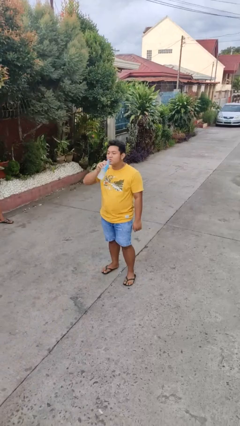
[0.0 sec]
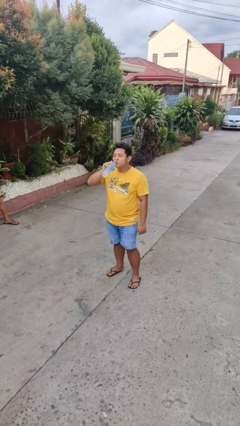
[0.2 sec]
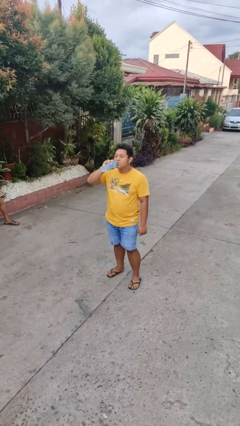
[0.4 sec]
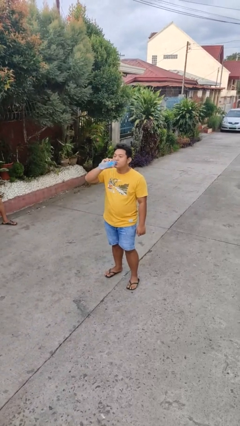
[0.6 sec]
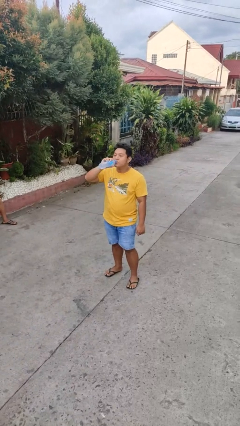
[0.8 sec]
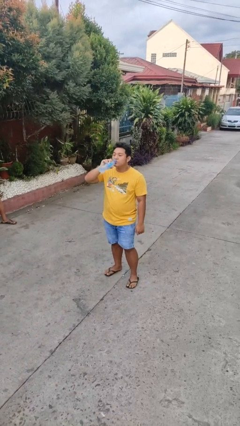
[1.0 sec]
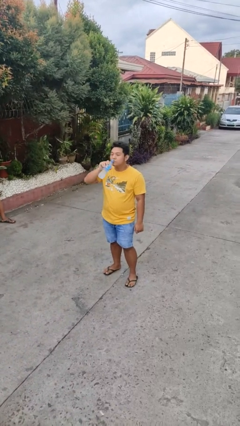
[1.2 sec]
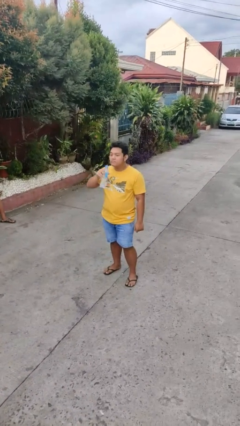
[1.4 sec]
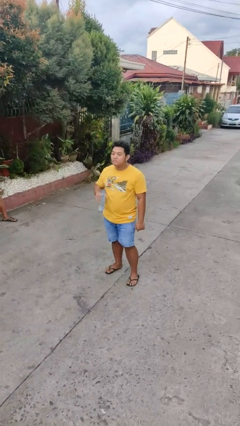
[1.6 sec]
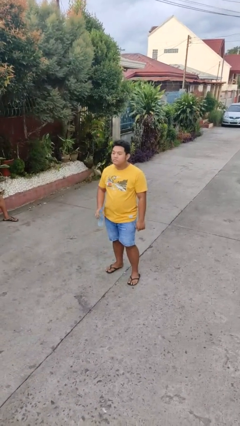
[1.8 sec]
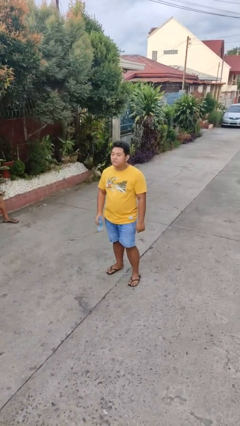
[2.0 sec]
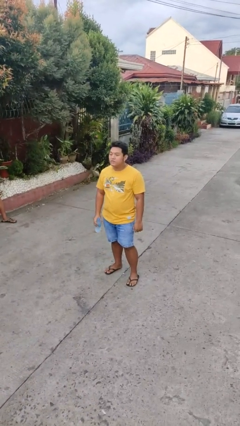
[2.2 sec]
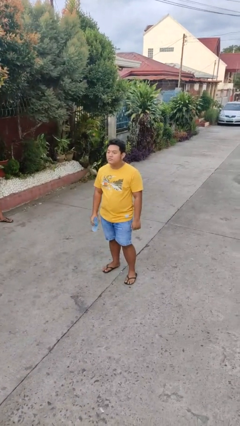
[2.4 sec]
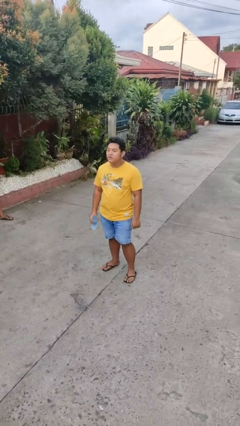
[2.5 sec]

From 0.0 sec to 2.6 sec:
person drinks from bottle

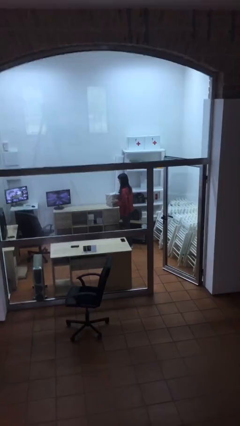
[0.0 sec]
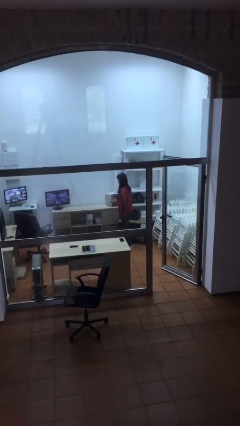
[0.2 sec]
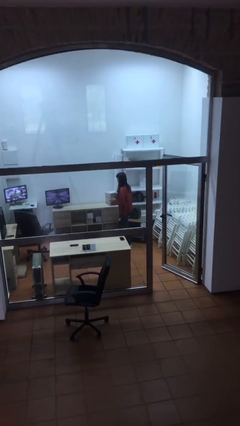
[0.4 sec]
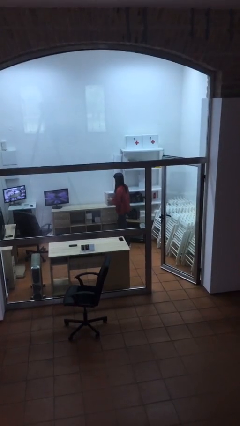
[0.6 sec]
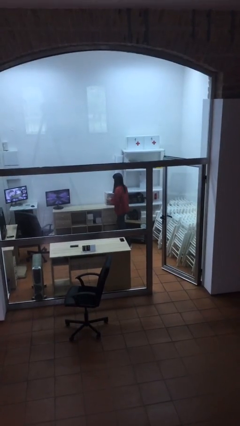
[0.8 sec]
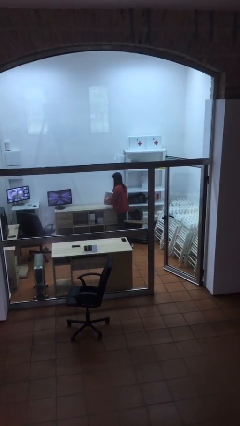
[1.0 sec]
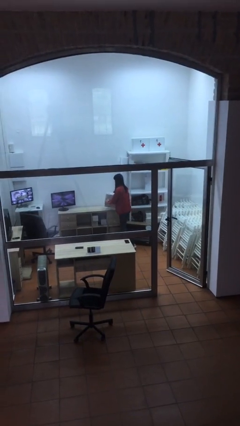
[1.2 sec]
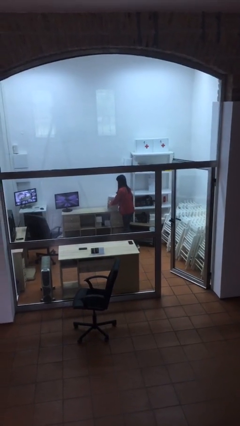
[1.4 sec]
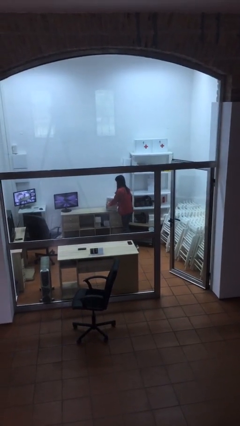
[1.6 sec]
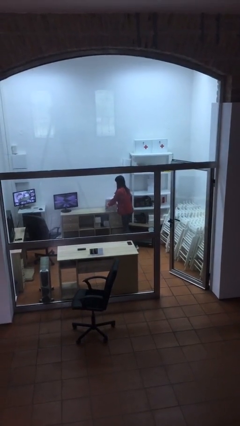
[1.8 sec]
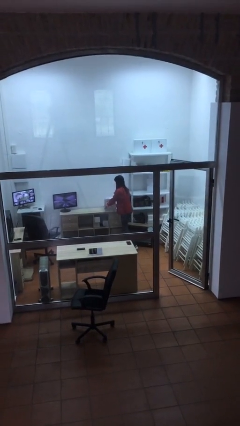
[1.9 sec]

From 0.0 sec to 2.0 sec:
person puts down object on table

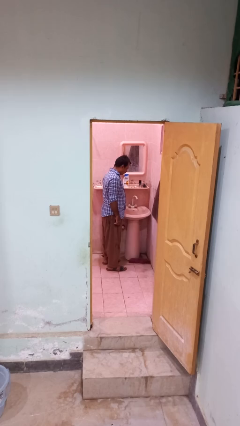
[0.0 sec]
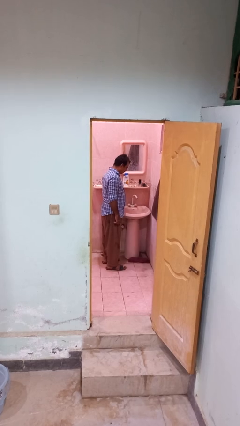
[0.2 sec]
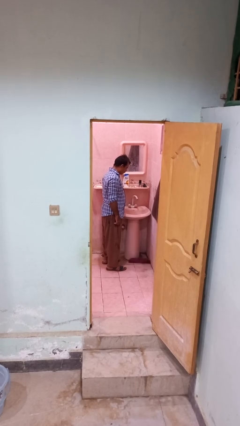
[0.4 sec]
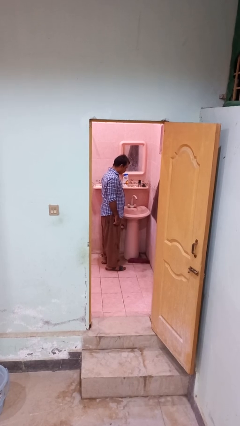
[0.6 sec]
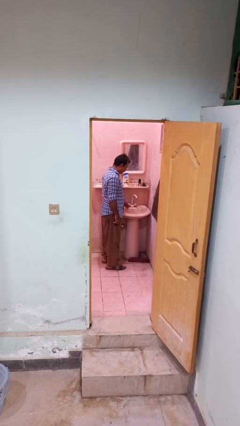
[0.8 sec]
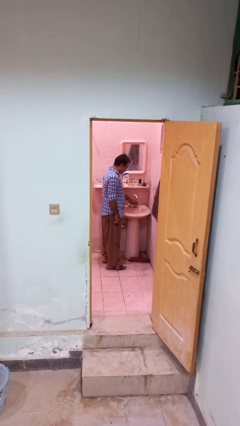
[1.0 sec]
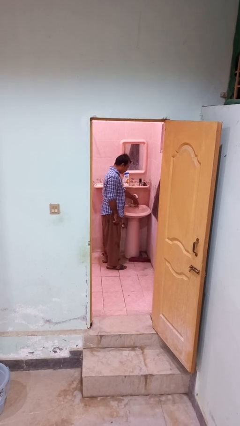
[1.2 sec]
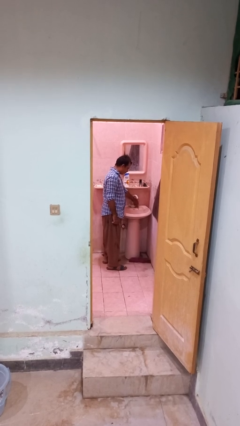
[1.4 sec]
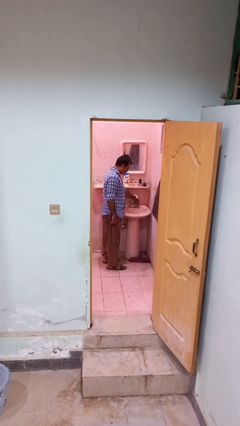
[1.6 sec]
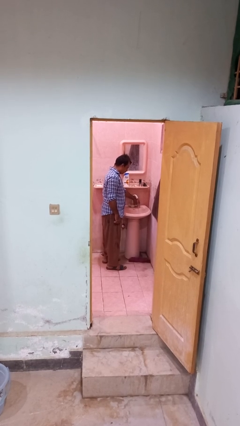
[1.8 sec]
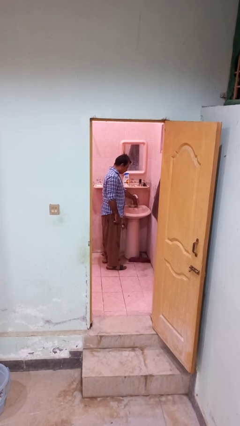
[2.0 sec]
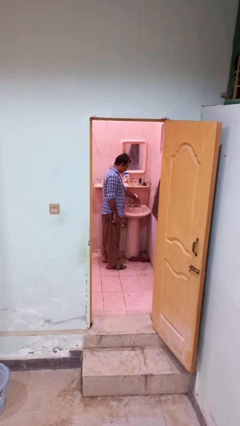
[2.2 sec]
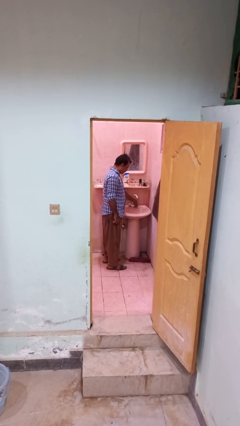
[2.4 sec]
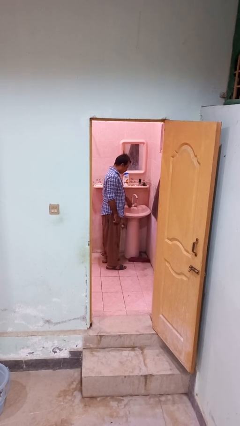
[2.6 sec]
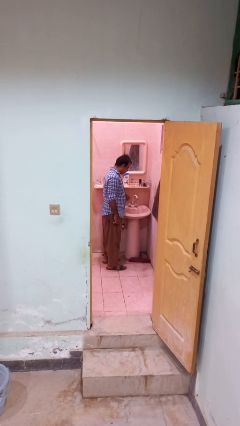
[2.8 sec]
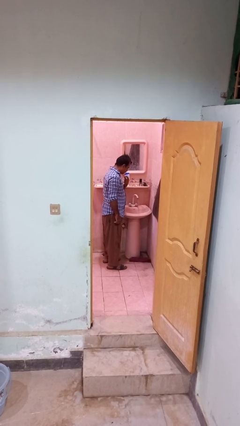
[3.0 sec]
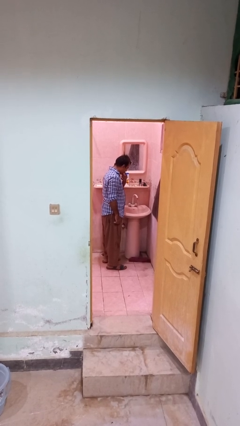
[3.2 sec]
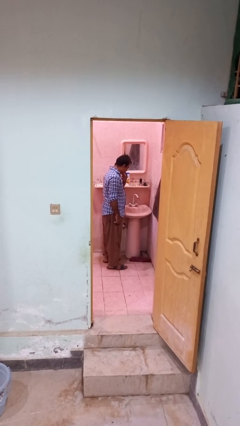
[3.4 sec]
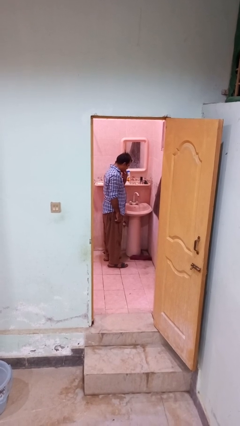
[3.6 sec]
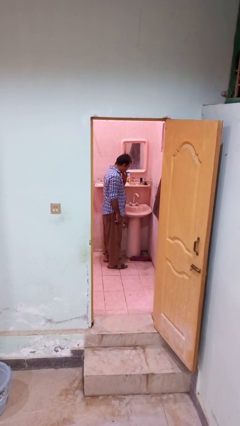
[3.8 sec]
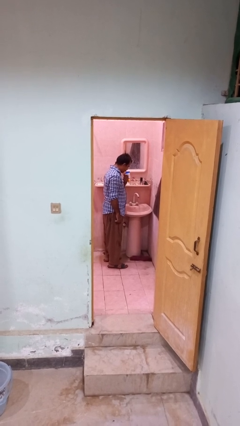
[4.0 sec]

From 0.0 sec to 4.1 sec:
person opens clothes washer

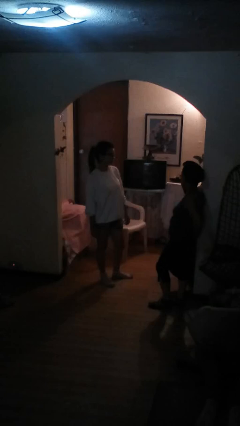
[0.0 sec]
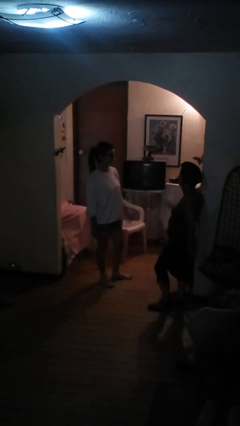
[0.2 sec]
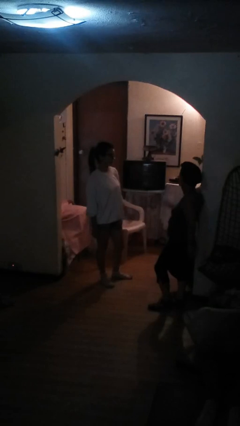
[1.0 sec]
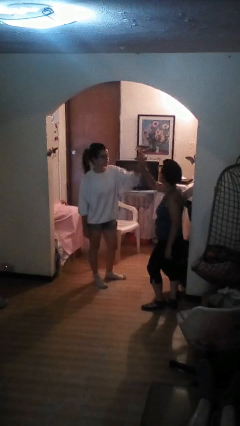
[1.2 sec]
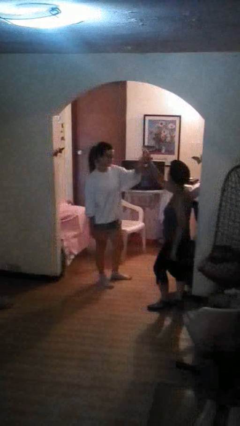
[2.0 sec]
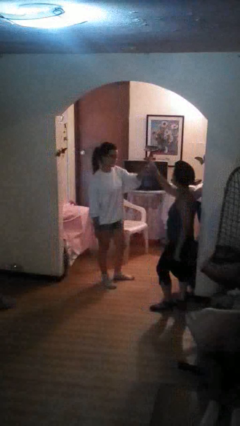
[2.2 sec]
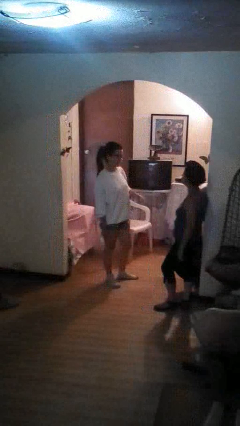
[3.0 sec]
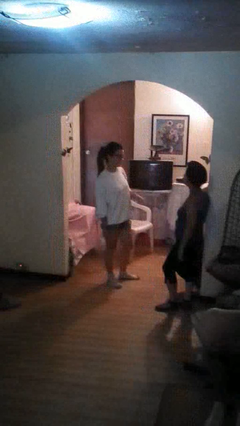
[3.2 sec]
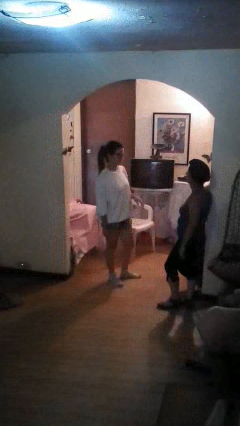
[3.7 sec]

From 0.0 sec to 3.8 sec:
person highfives hand

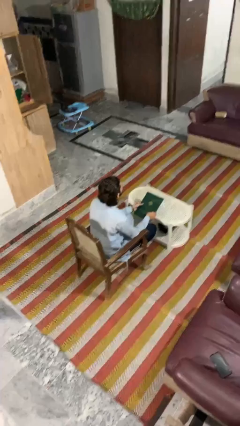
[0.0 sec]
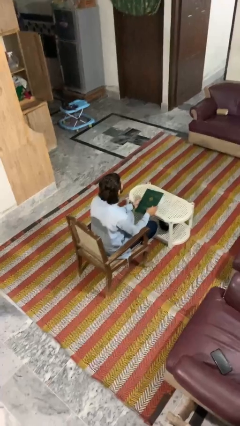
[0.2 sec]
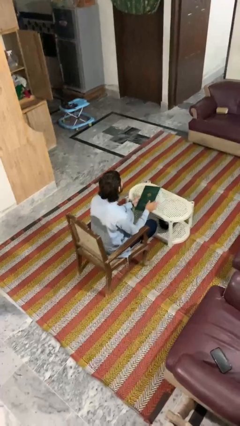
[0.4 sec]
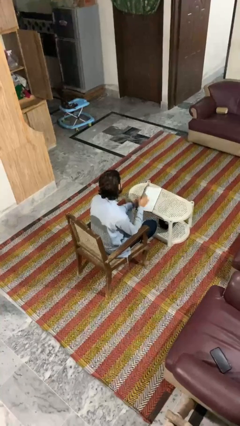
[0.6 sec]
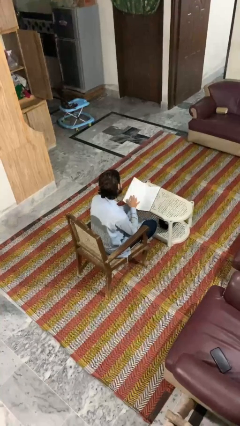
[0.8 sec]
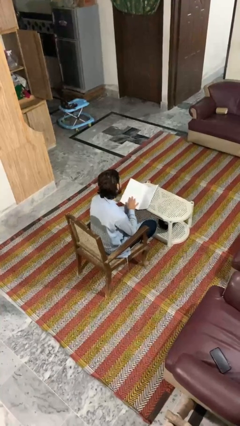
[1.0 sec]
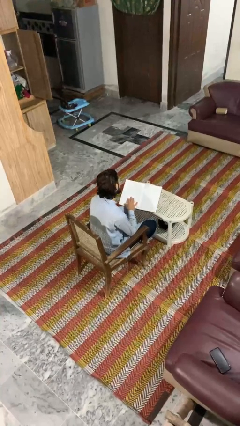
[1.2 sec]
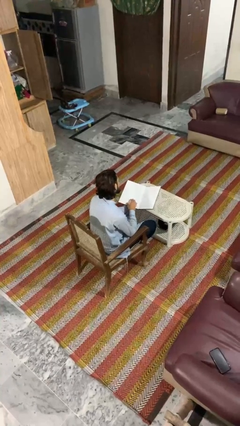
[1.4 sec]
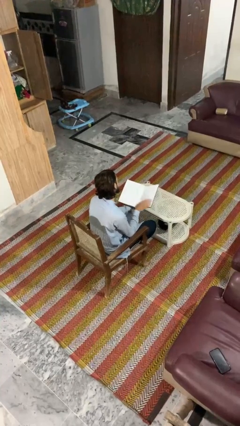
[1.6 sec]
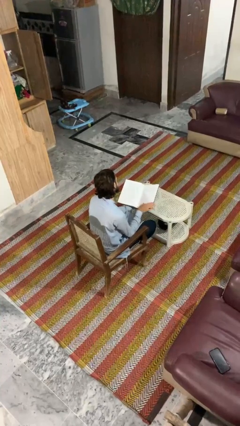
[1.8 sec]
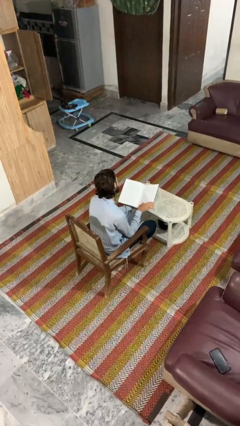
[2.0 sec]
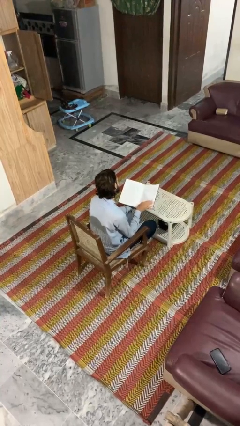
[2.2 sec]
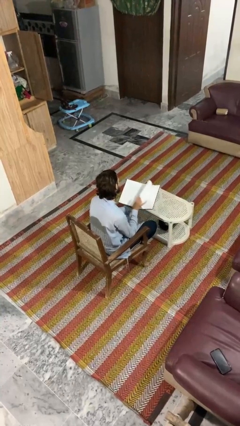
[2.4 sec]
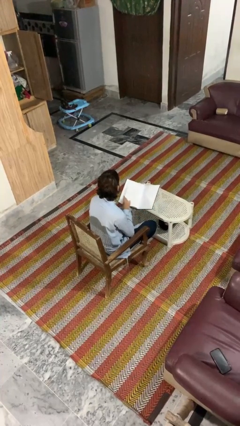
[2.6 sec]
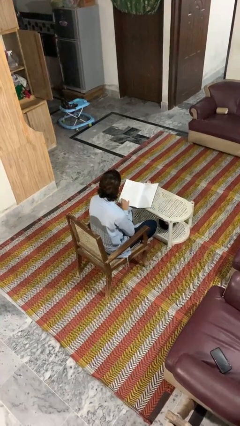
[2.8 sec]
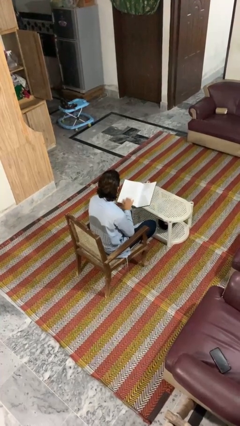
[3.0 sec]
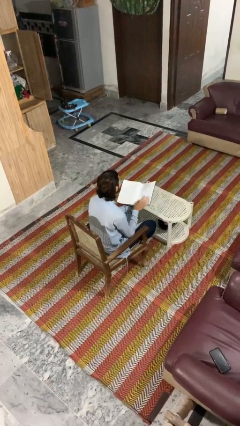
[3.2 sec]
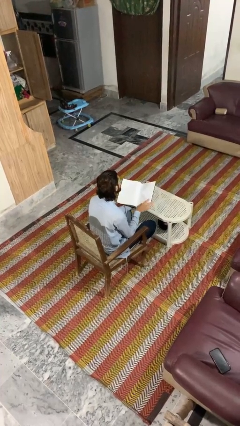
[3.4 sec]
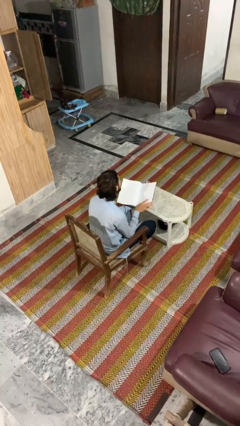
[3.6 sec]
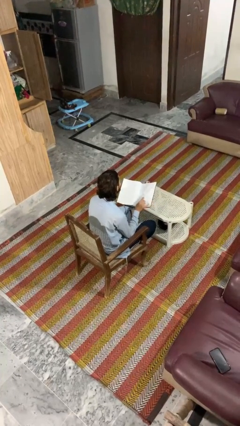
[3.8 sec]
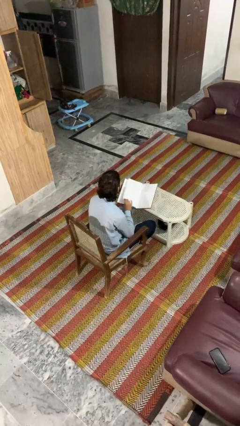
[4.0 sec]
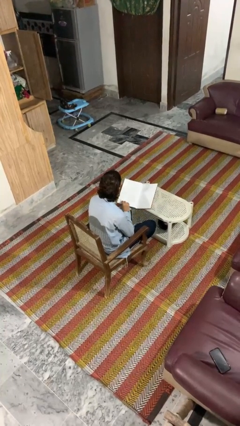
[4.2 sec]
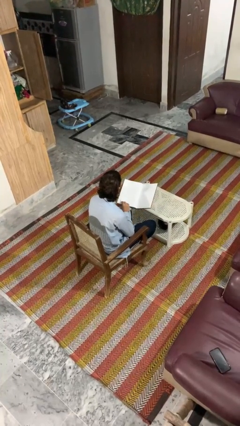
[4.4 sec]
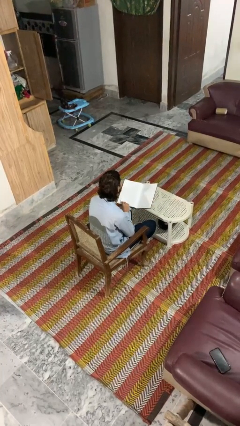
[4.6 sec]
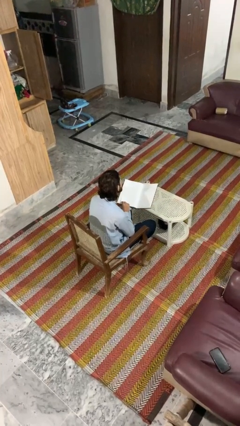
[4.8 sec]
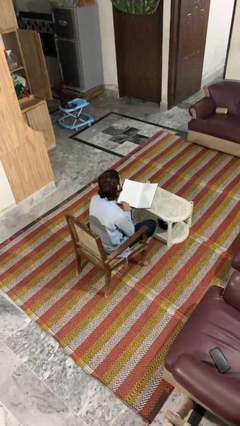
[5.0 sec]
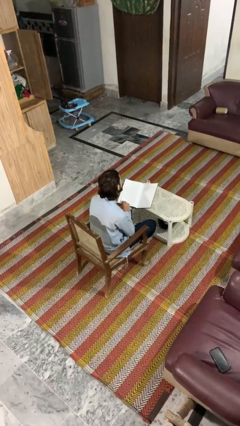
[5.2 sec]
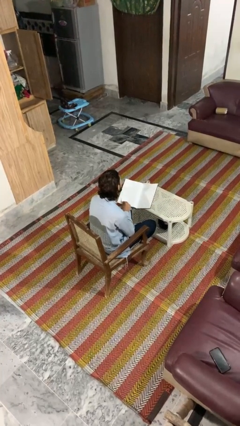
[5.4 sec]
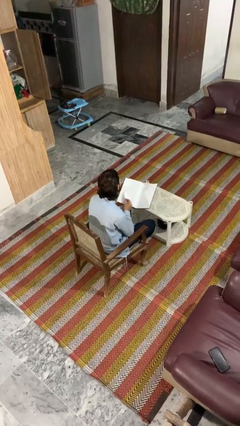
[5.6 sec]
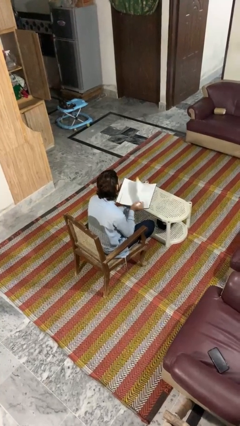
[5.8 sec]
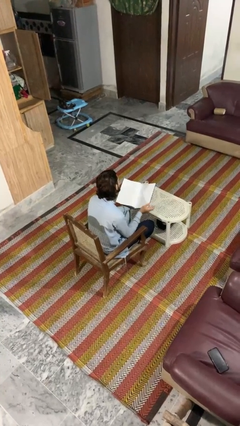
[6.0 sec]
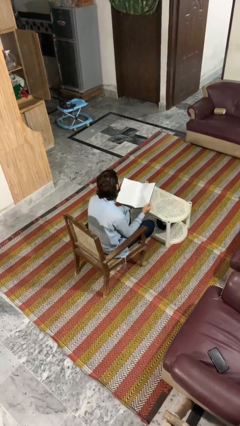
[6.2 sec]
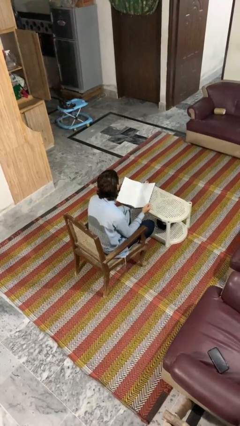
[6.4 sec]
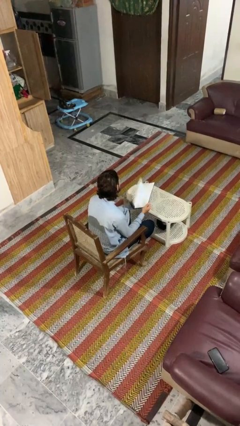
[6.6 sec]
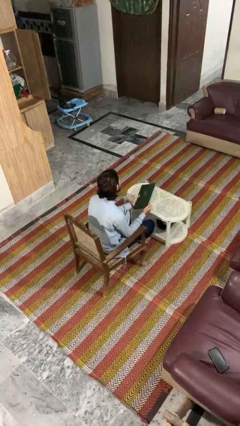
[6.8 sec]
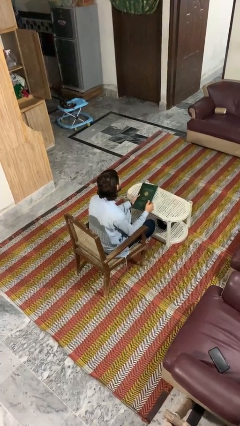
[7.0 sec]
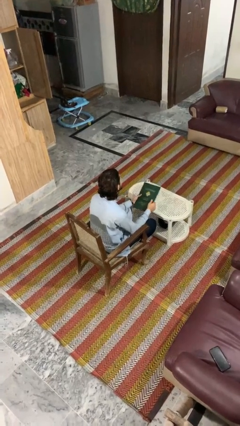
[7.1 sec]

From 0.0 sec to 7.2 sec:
person reads book

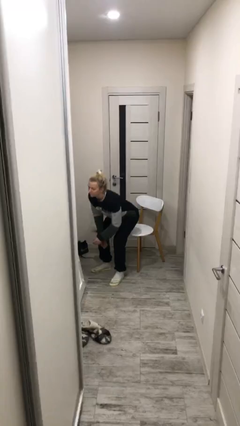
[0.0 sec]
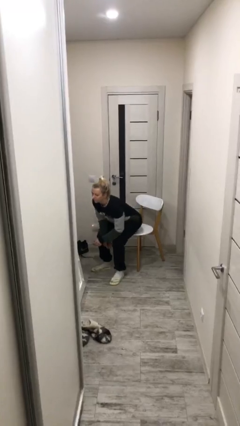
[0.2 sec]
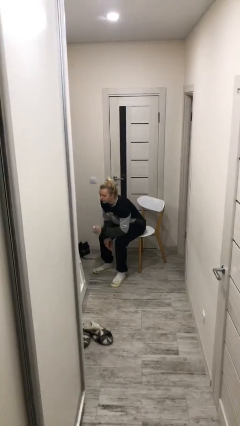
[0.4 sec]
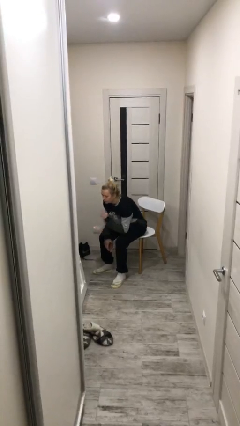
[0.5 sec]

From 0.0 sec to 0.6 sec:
person sits down
